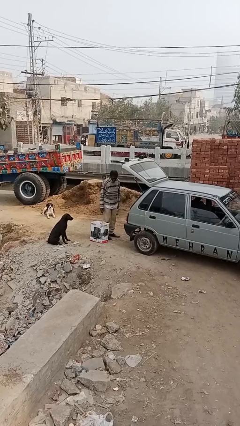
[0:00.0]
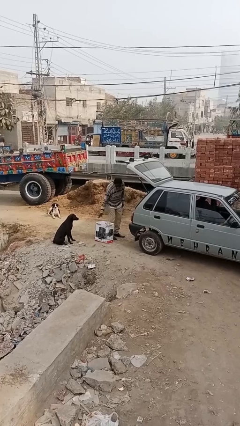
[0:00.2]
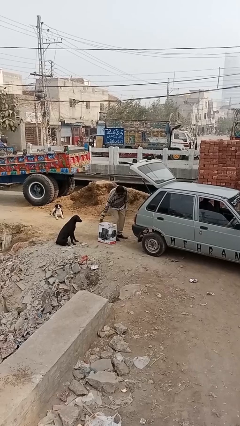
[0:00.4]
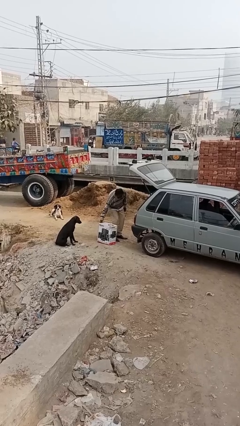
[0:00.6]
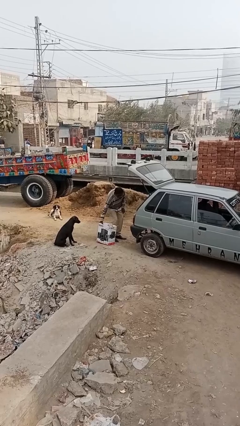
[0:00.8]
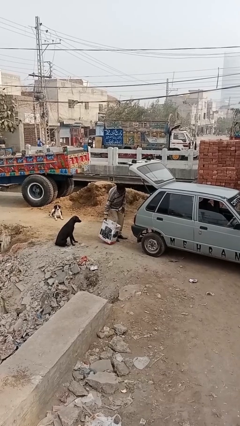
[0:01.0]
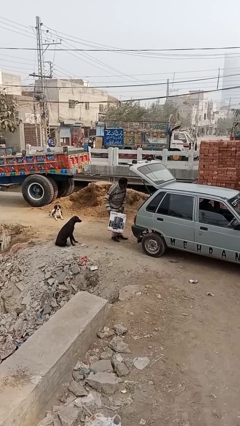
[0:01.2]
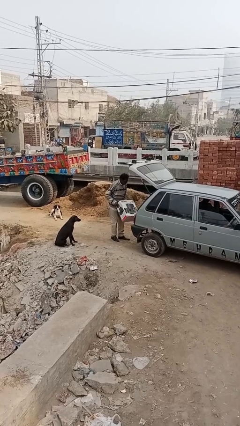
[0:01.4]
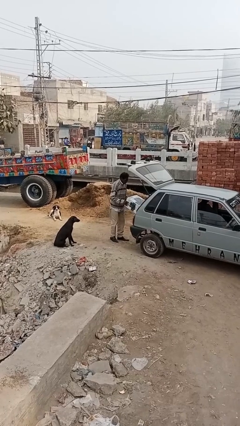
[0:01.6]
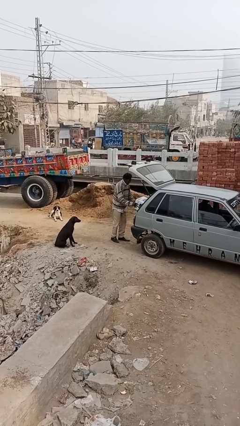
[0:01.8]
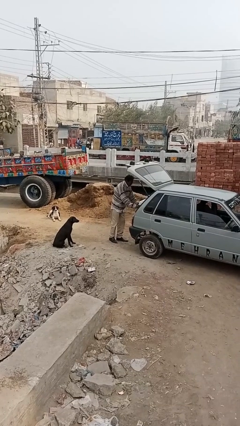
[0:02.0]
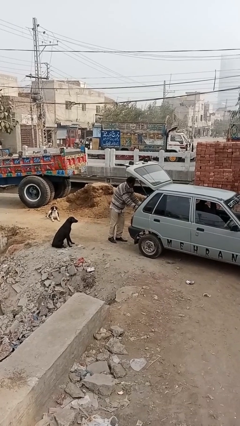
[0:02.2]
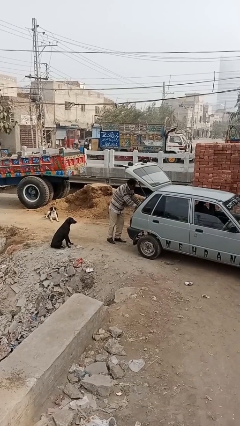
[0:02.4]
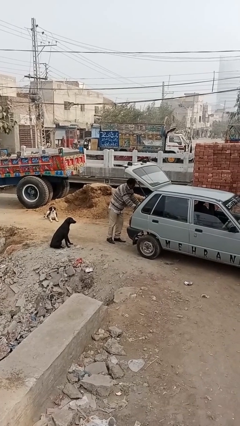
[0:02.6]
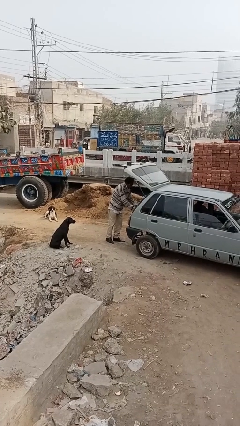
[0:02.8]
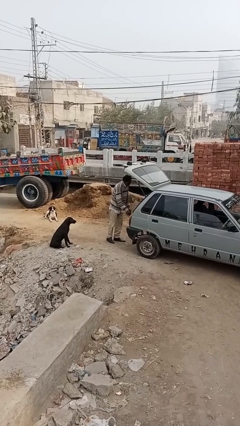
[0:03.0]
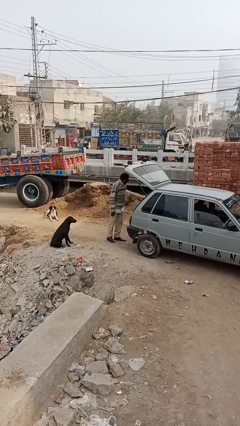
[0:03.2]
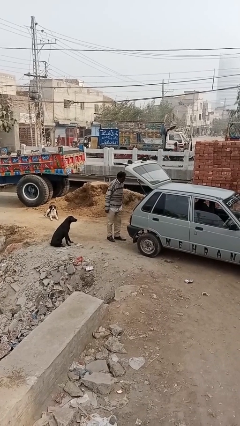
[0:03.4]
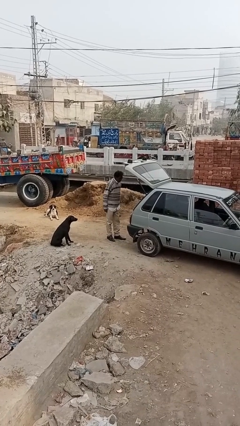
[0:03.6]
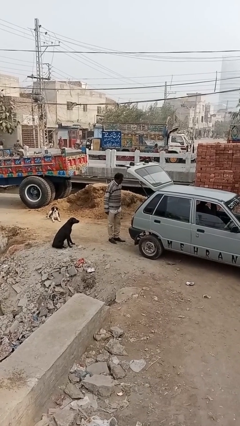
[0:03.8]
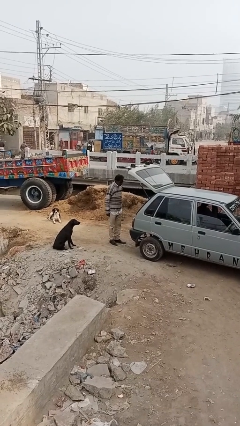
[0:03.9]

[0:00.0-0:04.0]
person loads car

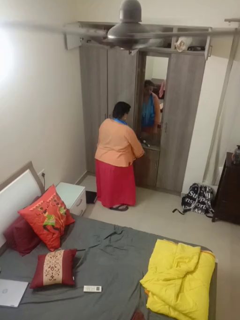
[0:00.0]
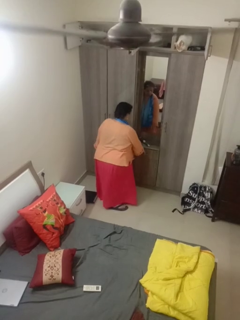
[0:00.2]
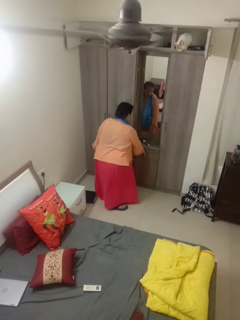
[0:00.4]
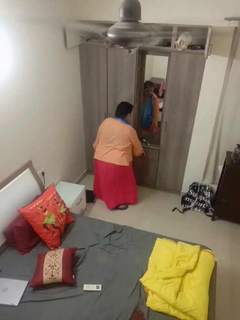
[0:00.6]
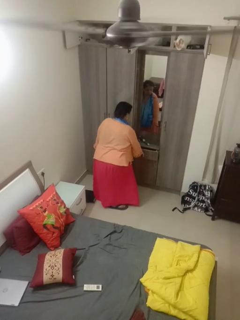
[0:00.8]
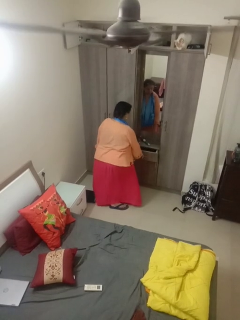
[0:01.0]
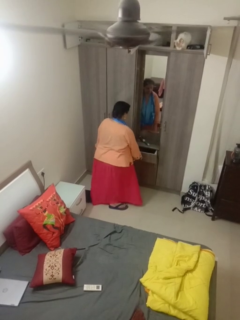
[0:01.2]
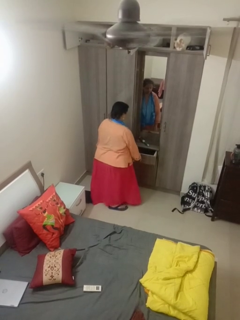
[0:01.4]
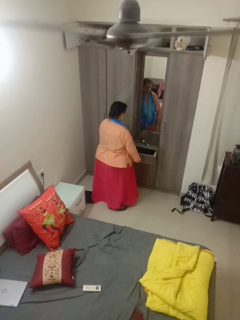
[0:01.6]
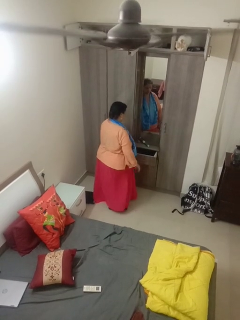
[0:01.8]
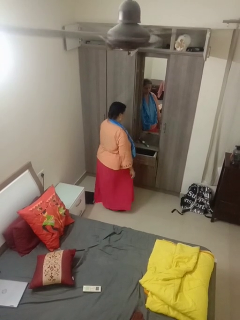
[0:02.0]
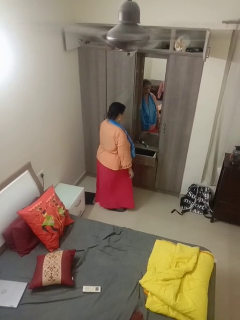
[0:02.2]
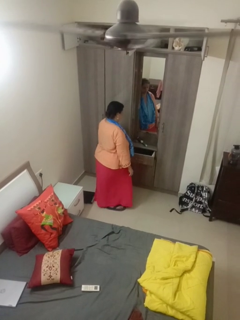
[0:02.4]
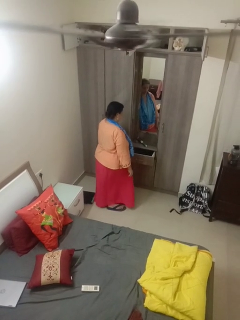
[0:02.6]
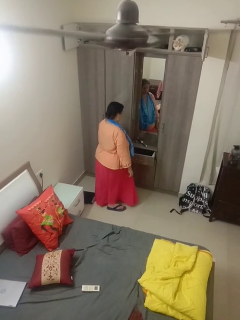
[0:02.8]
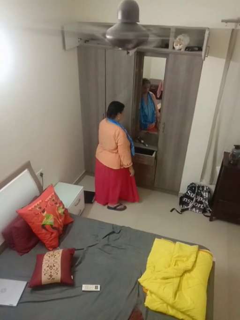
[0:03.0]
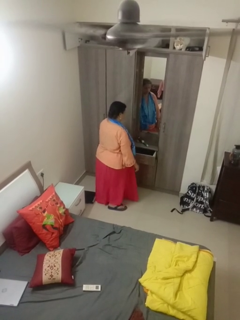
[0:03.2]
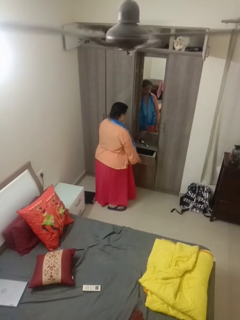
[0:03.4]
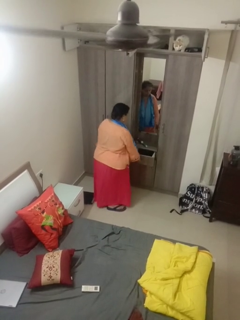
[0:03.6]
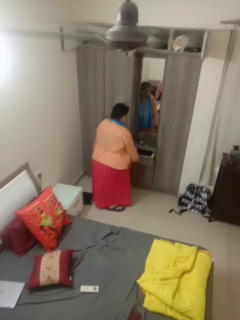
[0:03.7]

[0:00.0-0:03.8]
person opens dresser drawer

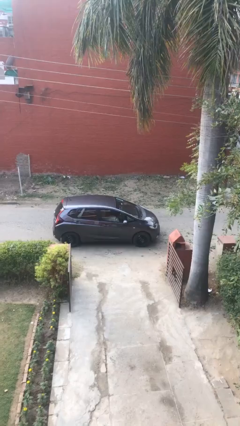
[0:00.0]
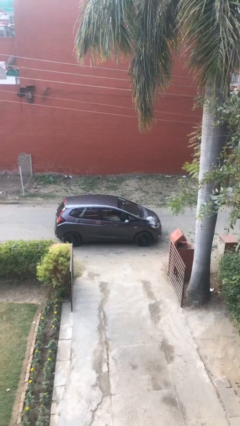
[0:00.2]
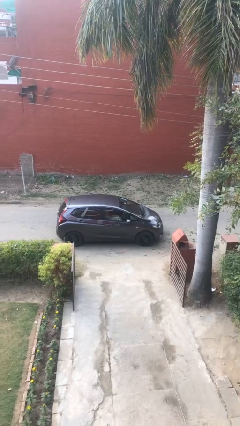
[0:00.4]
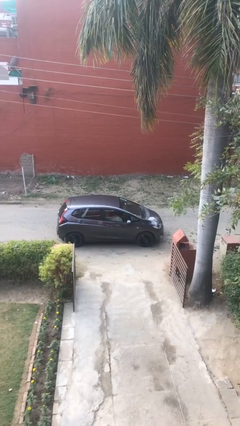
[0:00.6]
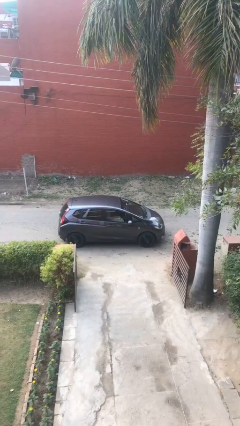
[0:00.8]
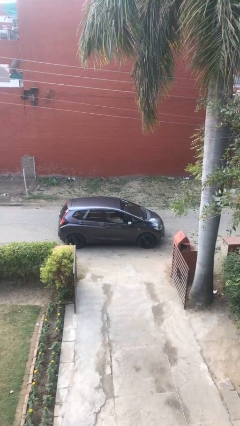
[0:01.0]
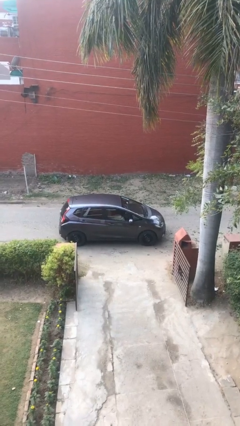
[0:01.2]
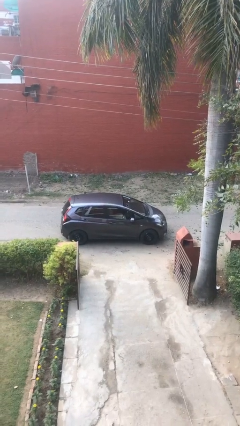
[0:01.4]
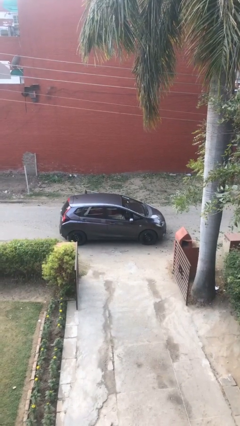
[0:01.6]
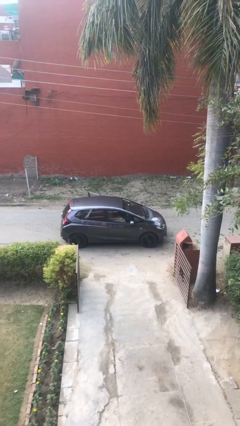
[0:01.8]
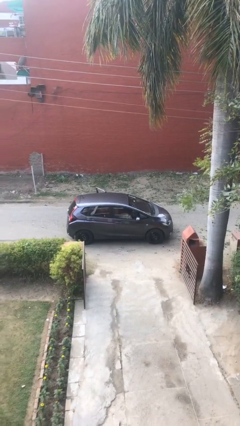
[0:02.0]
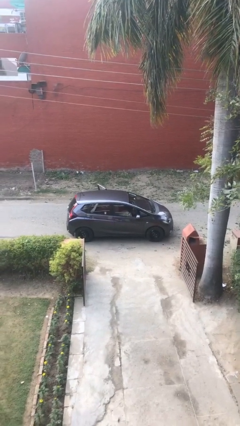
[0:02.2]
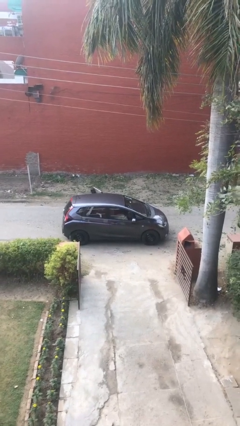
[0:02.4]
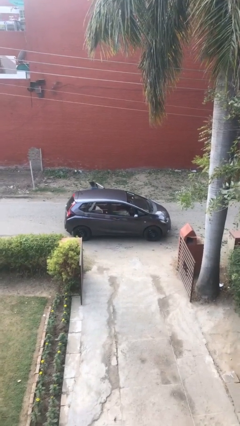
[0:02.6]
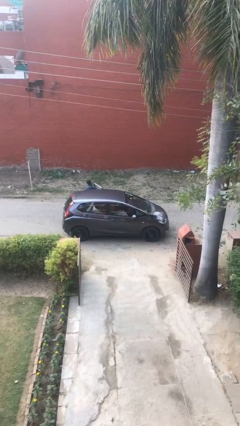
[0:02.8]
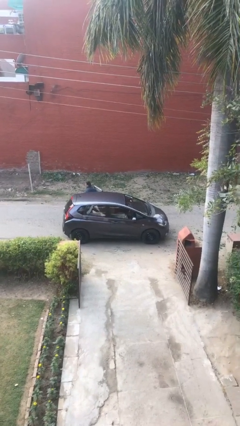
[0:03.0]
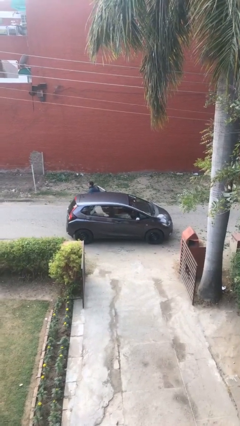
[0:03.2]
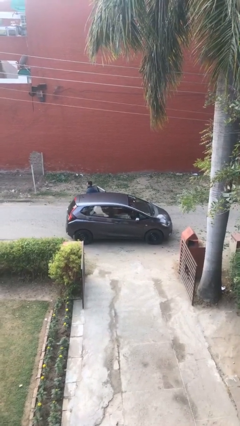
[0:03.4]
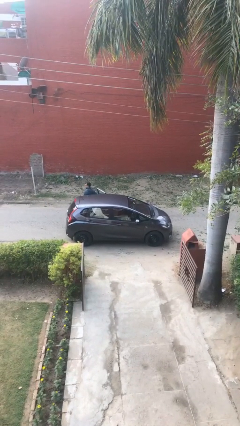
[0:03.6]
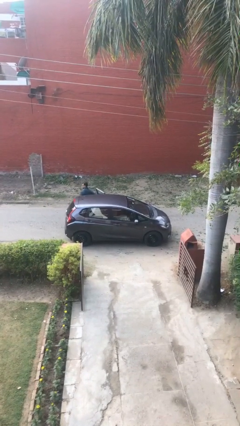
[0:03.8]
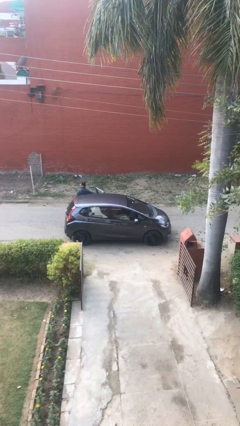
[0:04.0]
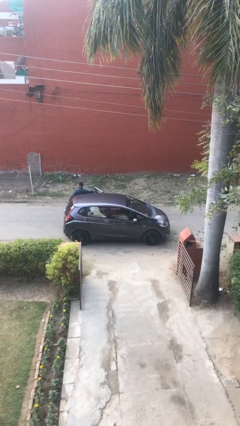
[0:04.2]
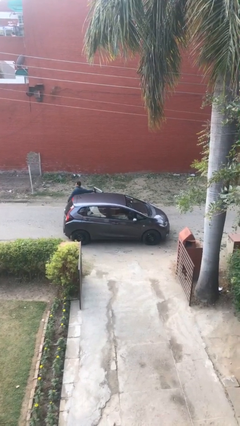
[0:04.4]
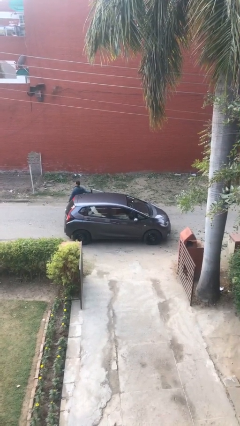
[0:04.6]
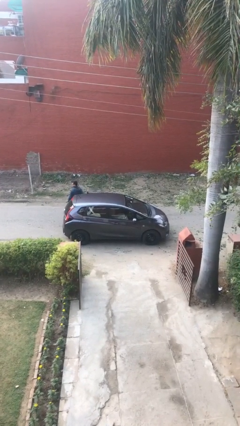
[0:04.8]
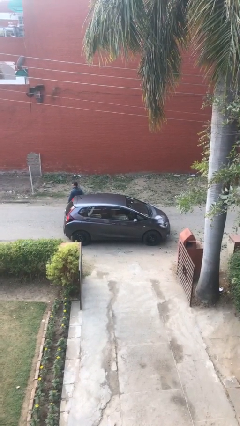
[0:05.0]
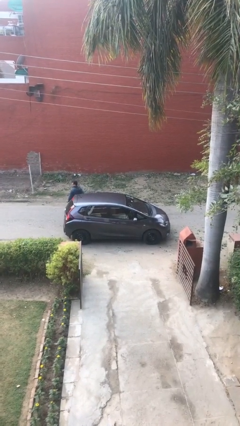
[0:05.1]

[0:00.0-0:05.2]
car drops off person

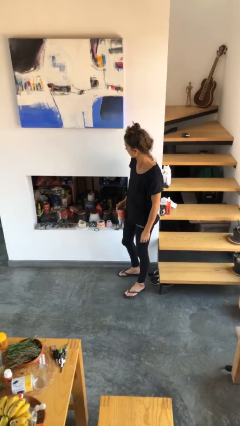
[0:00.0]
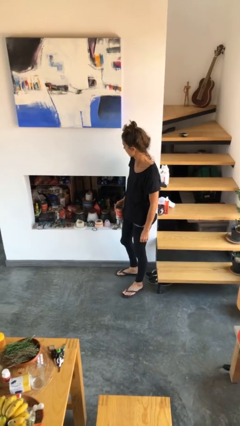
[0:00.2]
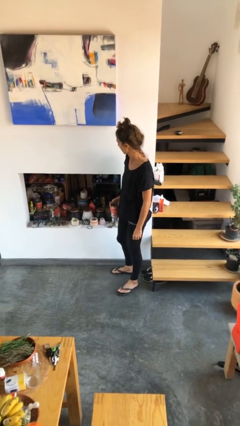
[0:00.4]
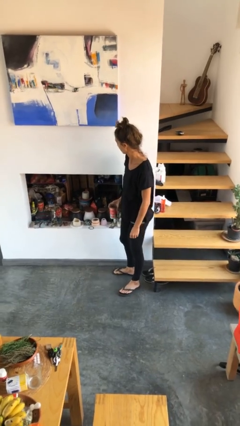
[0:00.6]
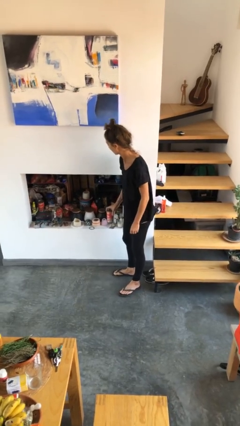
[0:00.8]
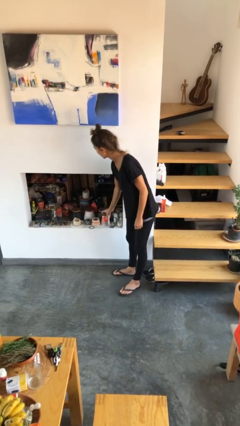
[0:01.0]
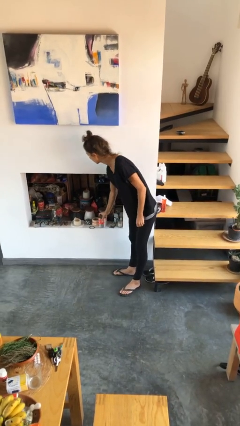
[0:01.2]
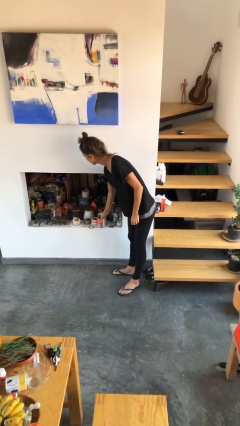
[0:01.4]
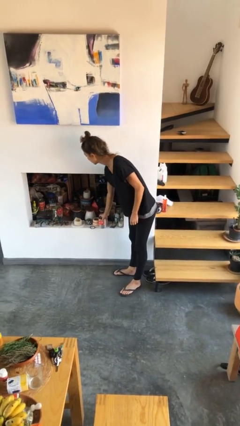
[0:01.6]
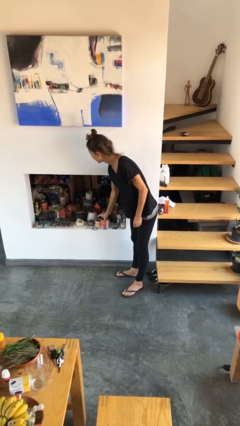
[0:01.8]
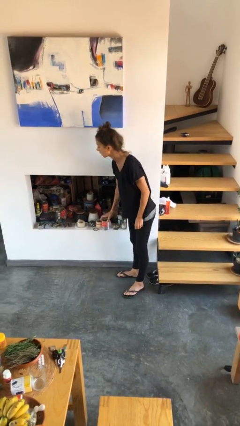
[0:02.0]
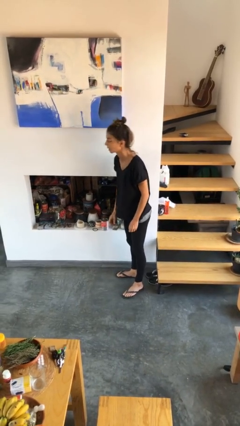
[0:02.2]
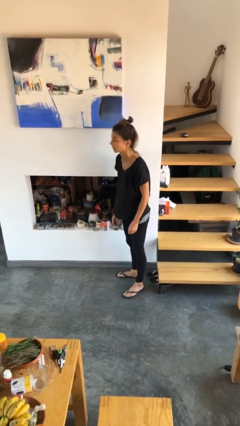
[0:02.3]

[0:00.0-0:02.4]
person puts down object into cabinet

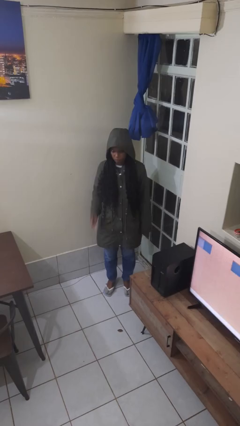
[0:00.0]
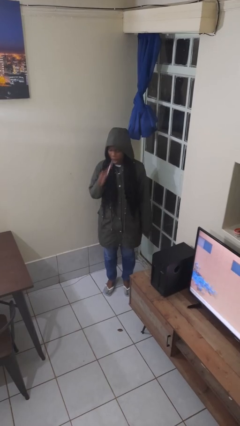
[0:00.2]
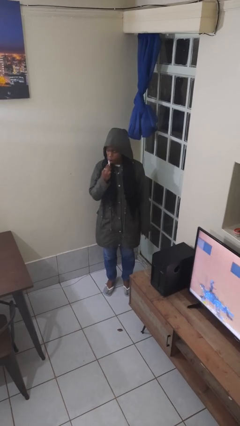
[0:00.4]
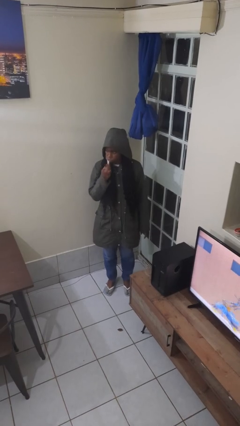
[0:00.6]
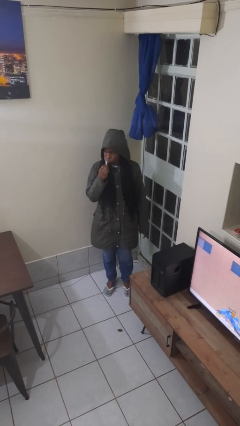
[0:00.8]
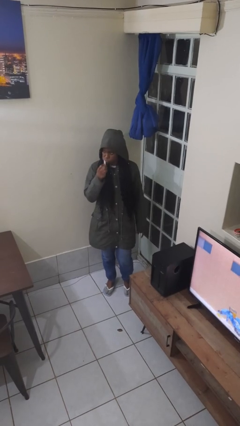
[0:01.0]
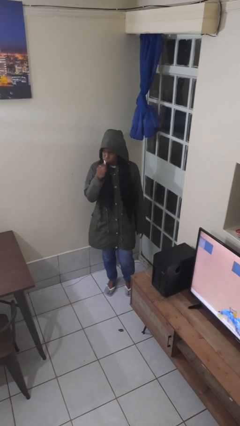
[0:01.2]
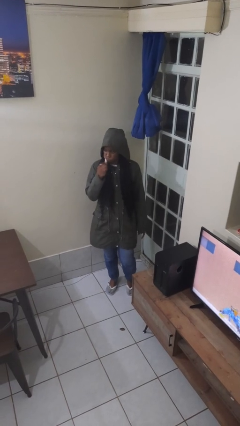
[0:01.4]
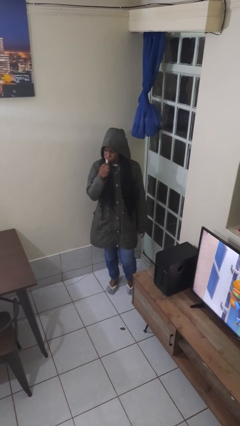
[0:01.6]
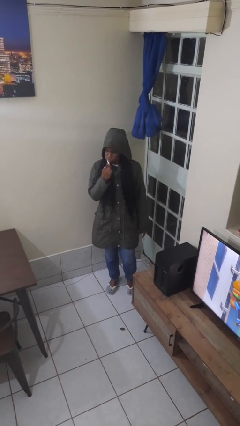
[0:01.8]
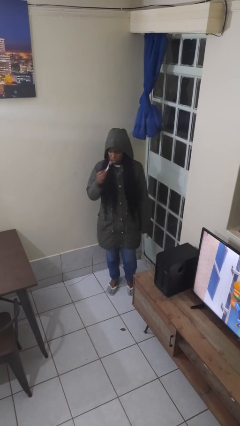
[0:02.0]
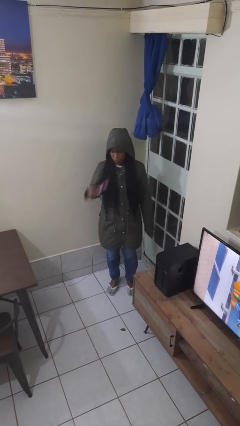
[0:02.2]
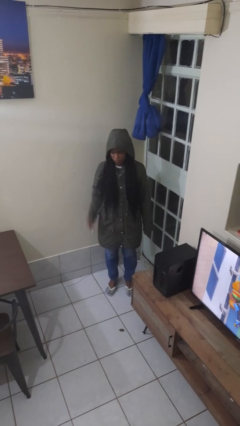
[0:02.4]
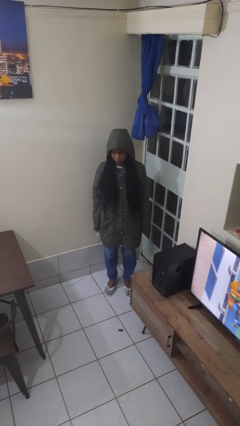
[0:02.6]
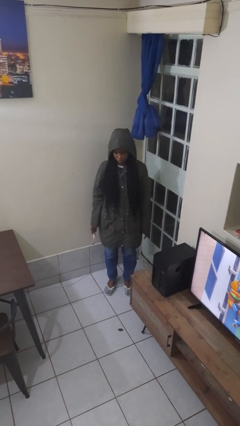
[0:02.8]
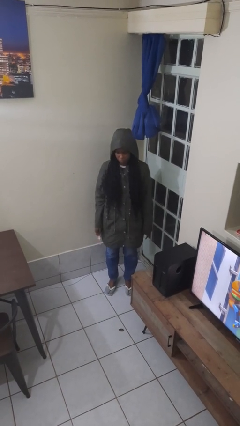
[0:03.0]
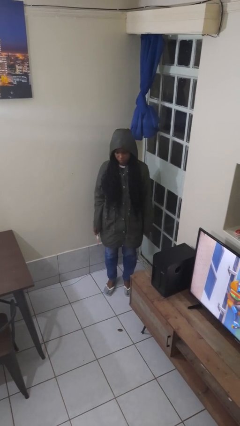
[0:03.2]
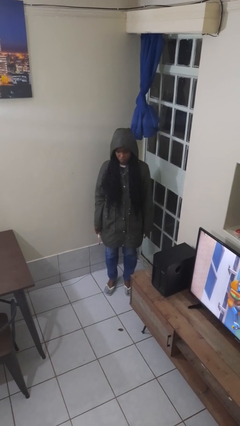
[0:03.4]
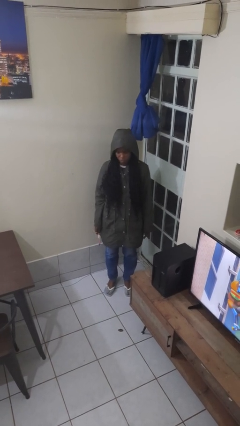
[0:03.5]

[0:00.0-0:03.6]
person brushes teeth
